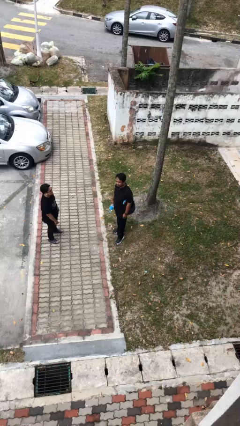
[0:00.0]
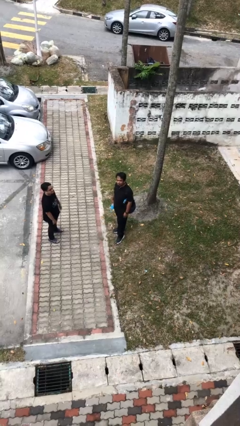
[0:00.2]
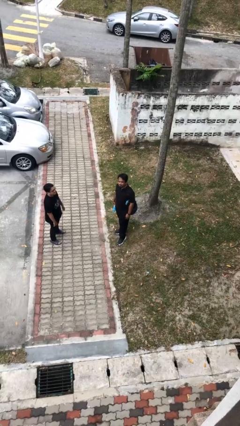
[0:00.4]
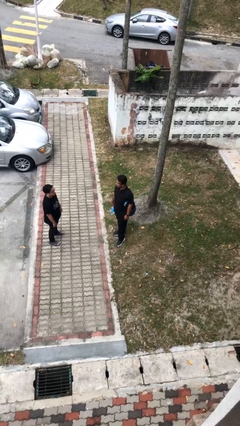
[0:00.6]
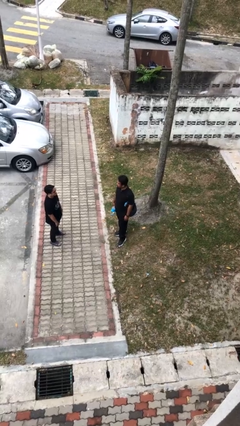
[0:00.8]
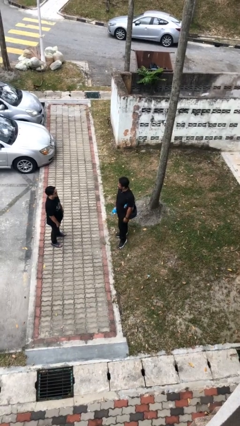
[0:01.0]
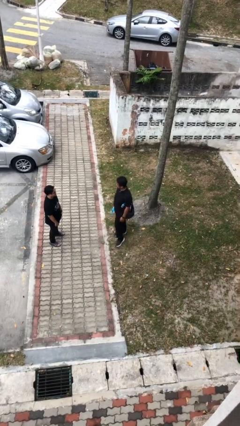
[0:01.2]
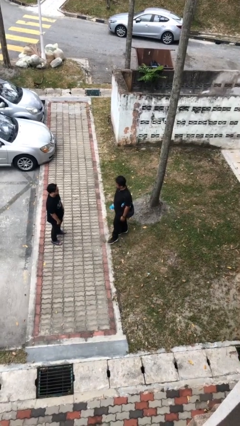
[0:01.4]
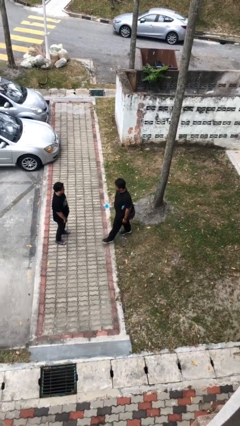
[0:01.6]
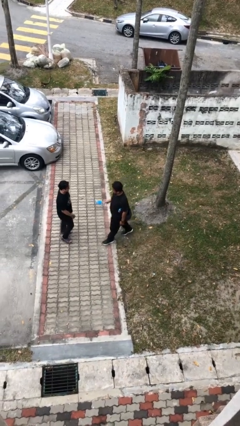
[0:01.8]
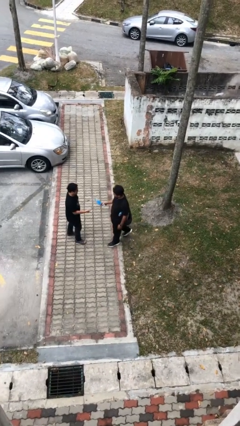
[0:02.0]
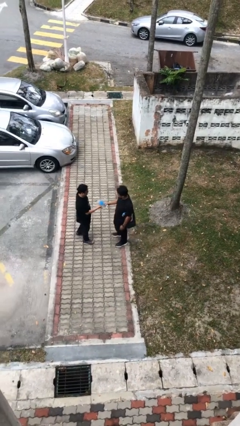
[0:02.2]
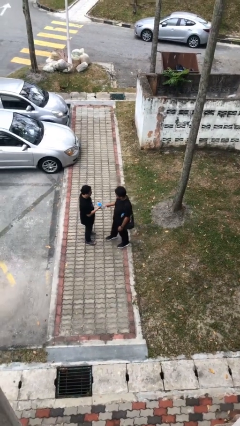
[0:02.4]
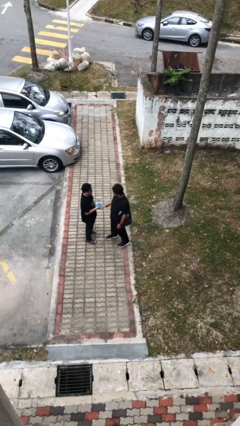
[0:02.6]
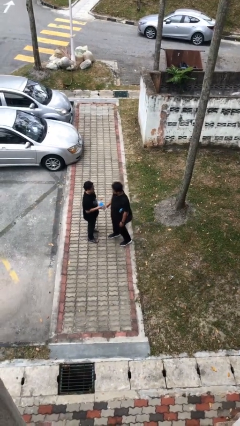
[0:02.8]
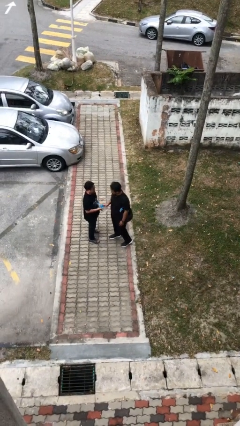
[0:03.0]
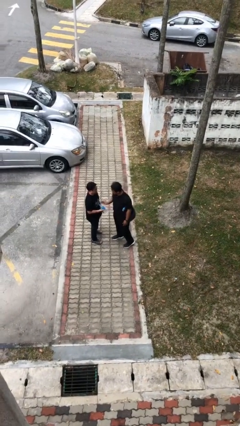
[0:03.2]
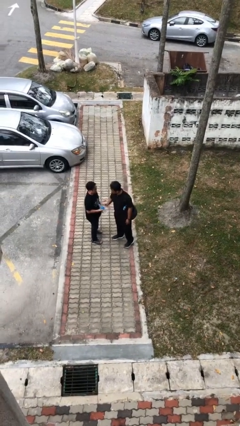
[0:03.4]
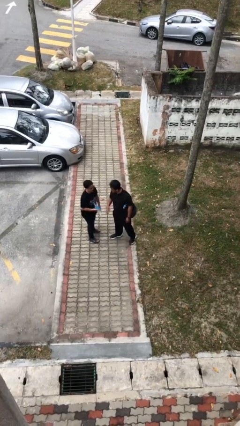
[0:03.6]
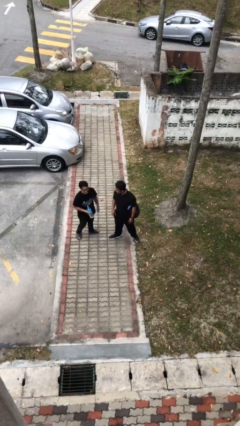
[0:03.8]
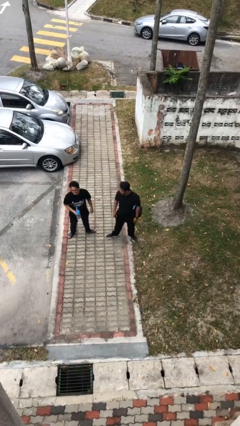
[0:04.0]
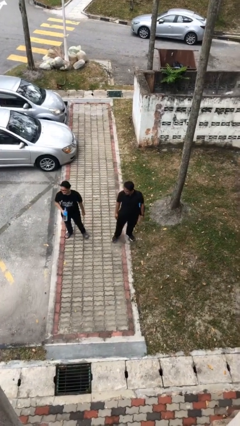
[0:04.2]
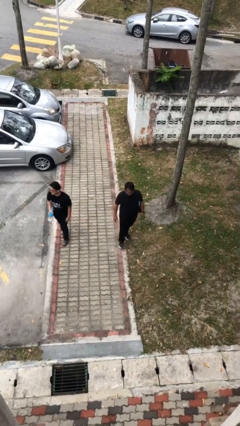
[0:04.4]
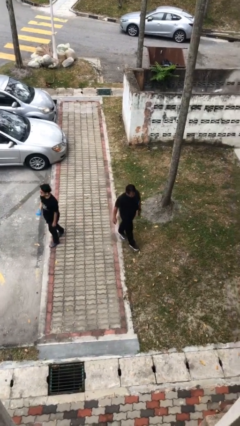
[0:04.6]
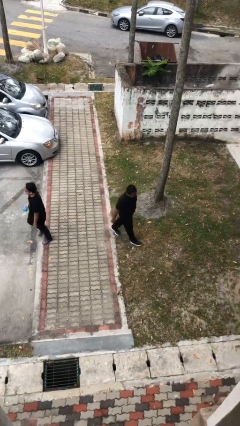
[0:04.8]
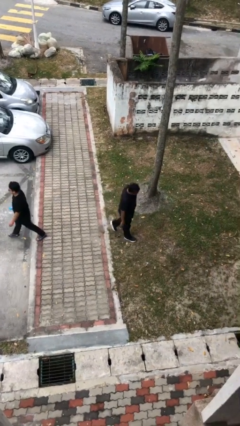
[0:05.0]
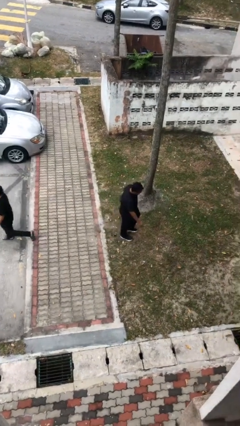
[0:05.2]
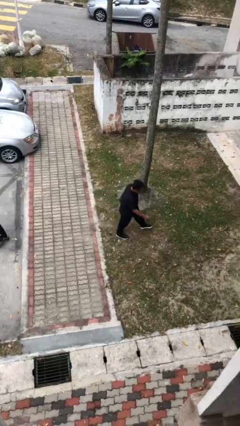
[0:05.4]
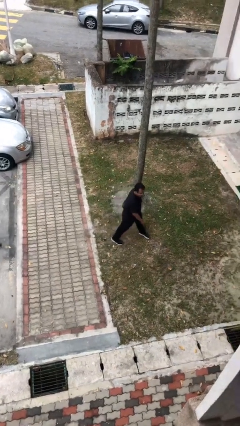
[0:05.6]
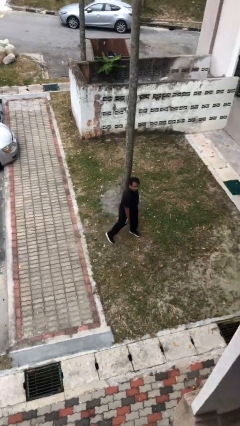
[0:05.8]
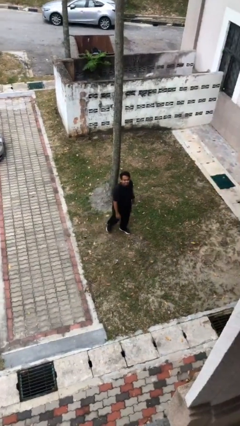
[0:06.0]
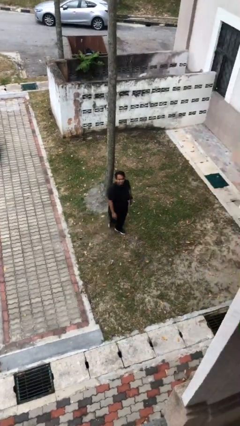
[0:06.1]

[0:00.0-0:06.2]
person transfers object to person

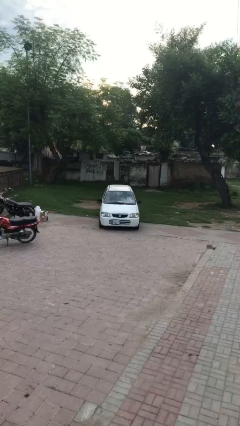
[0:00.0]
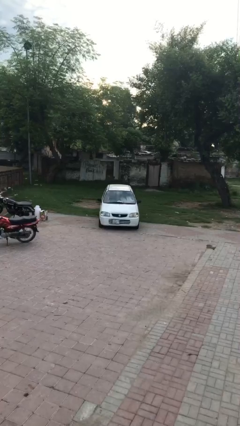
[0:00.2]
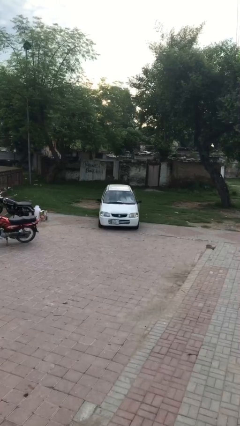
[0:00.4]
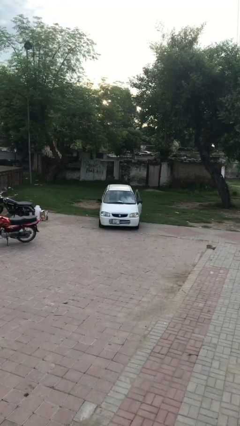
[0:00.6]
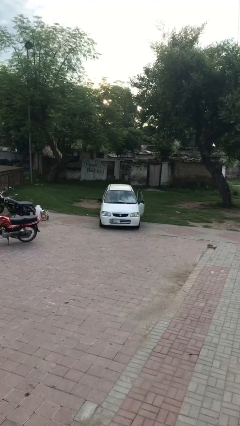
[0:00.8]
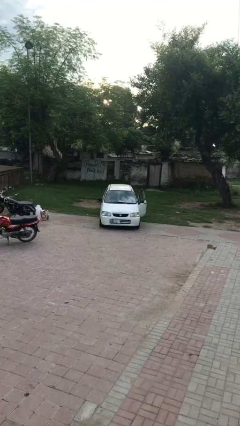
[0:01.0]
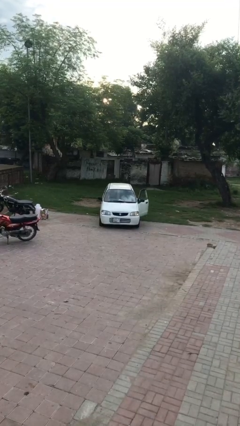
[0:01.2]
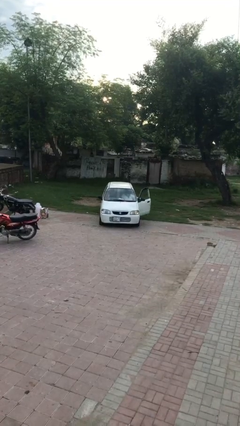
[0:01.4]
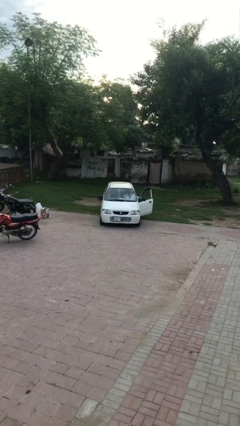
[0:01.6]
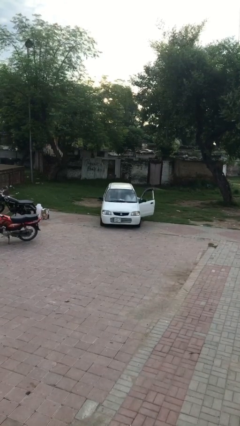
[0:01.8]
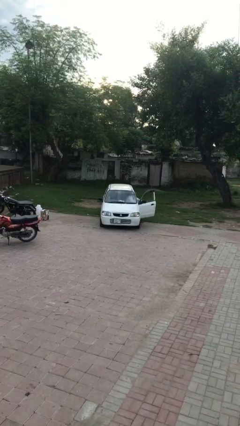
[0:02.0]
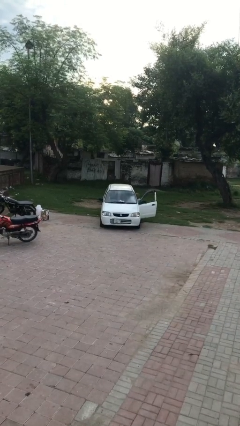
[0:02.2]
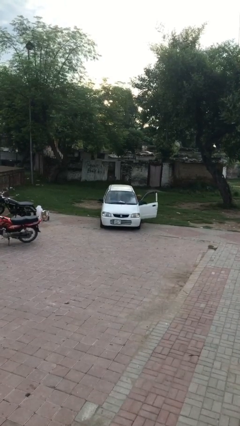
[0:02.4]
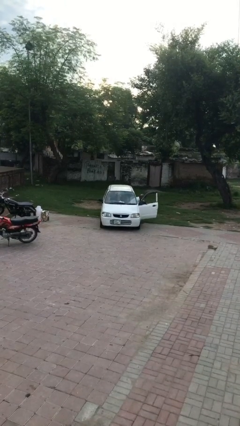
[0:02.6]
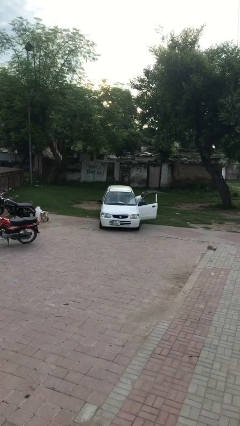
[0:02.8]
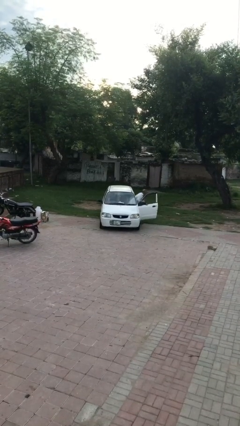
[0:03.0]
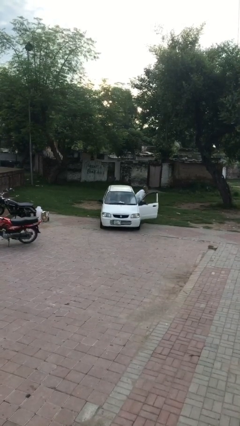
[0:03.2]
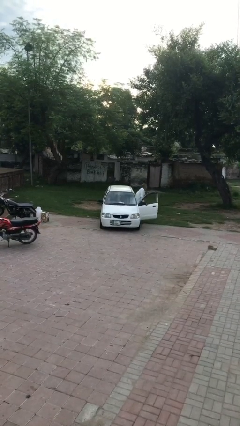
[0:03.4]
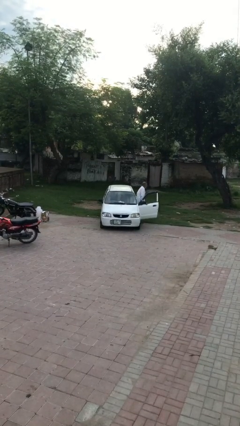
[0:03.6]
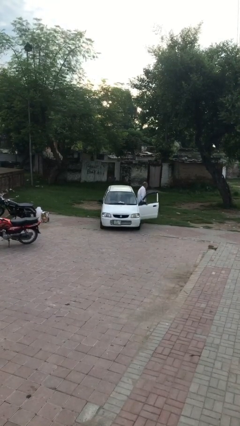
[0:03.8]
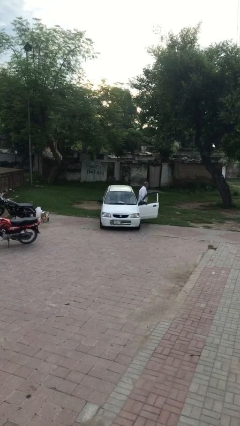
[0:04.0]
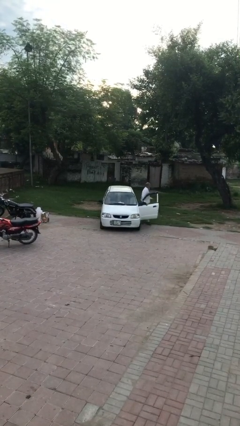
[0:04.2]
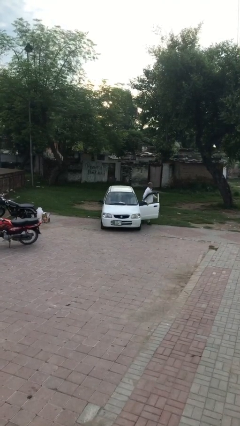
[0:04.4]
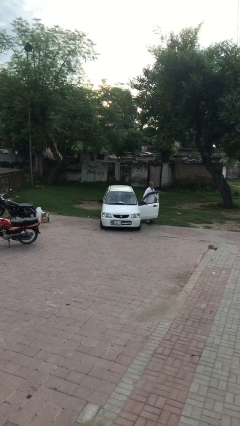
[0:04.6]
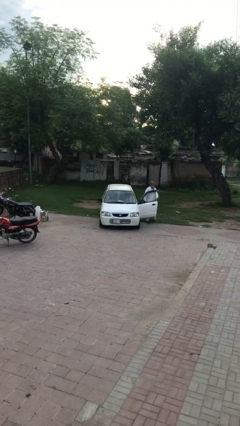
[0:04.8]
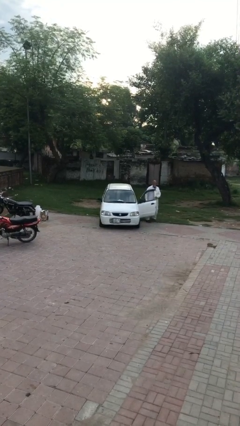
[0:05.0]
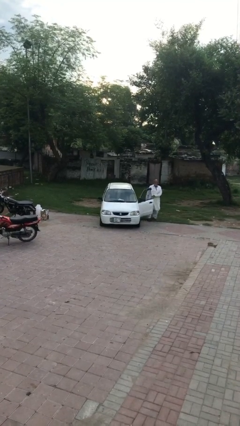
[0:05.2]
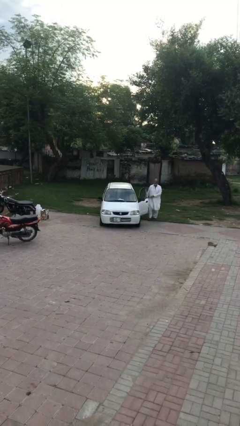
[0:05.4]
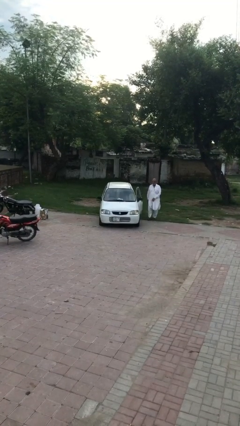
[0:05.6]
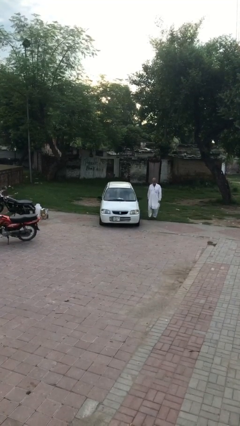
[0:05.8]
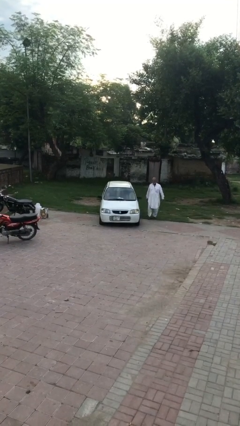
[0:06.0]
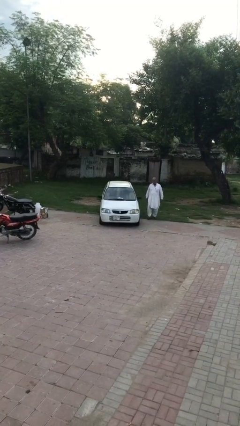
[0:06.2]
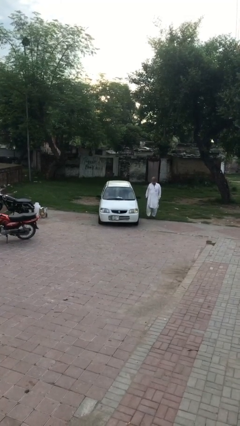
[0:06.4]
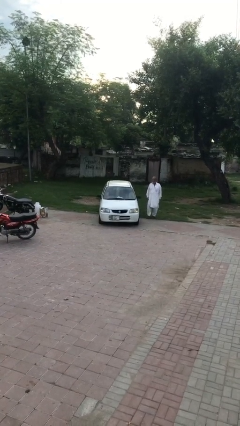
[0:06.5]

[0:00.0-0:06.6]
car drops off person

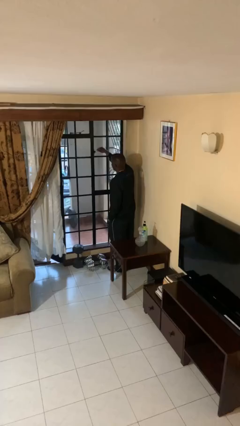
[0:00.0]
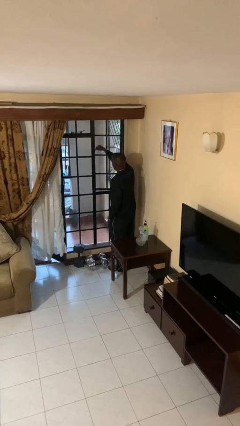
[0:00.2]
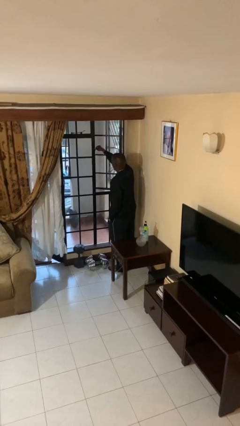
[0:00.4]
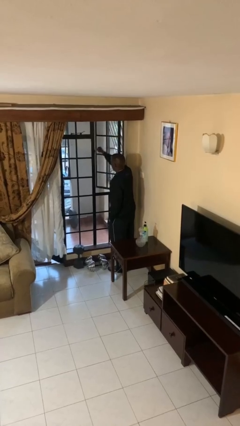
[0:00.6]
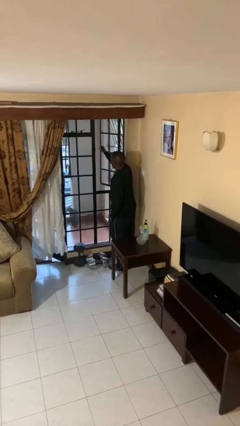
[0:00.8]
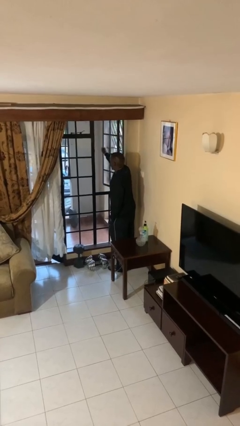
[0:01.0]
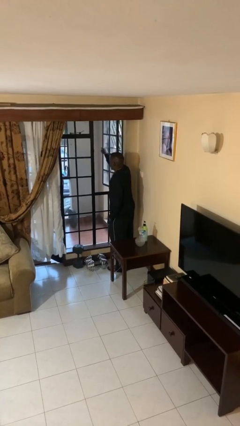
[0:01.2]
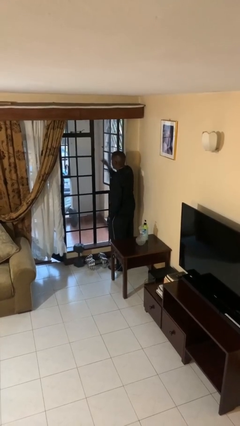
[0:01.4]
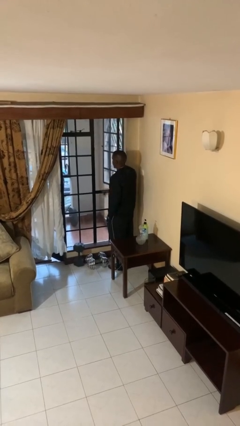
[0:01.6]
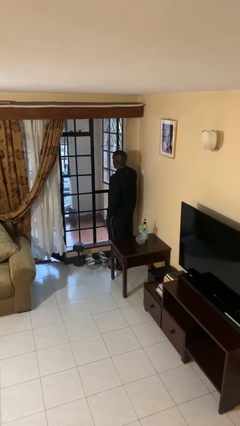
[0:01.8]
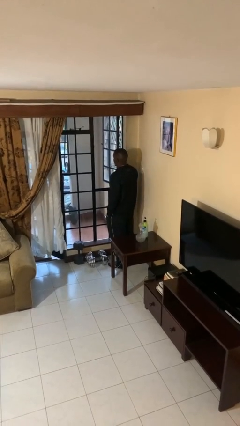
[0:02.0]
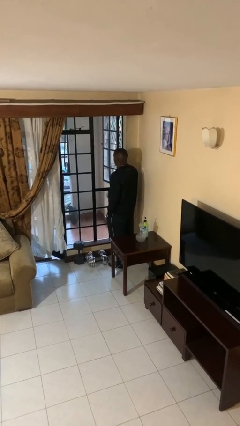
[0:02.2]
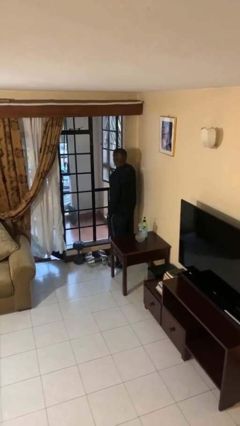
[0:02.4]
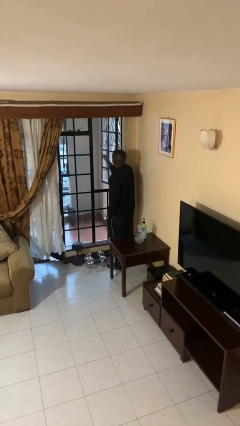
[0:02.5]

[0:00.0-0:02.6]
person opens home window

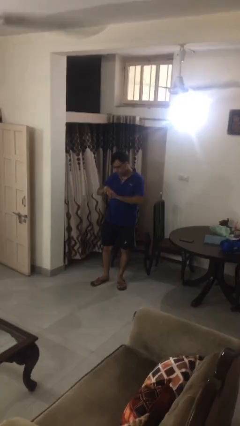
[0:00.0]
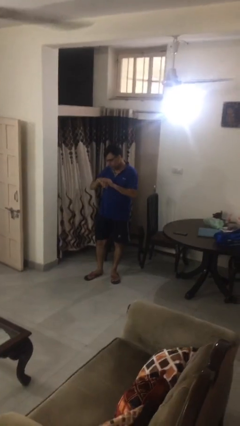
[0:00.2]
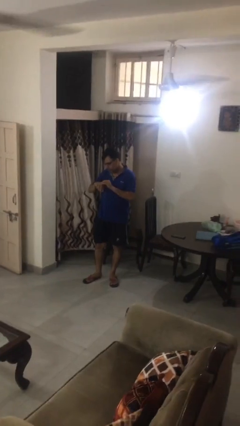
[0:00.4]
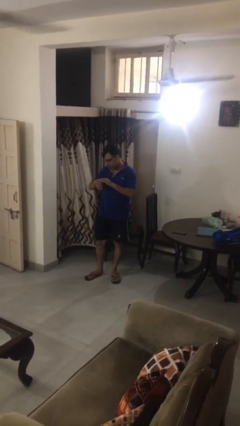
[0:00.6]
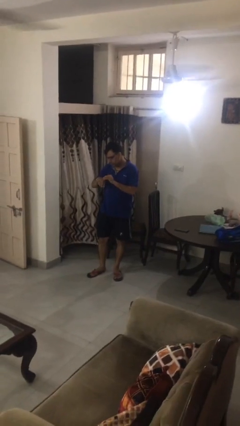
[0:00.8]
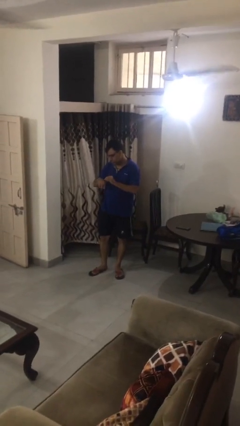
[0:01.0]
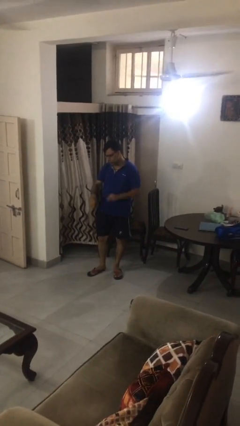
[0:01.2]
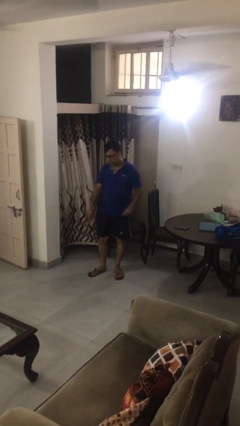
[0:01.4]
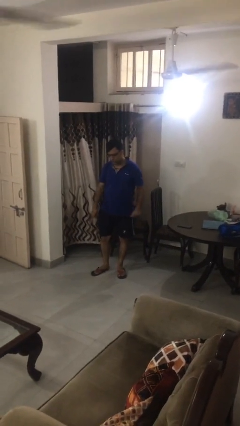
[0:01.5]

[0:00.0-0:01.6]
person swats bug

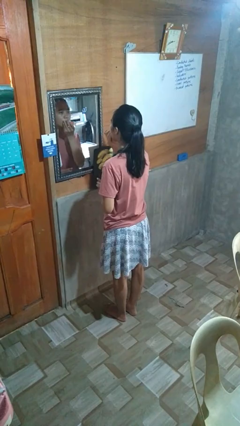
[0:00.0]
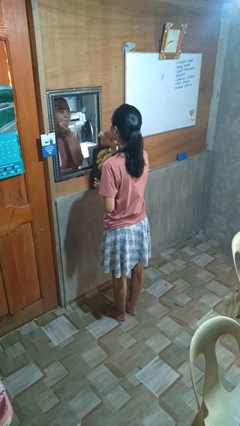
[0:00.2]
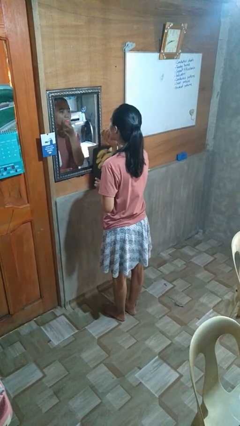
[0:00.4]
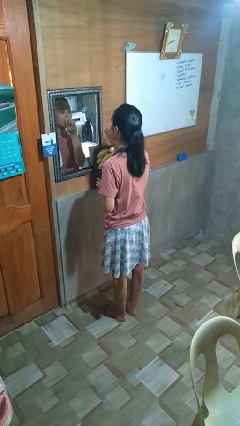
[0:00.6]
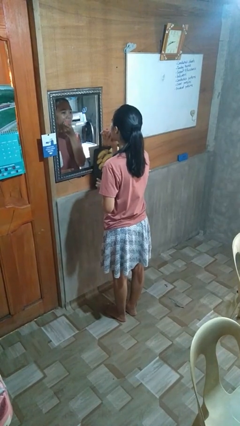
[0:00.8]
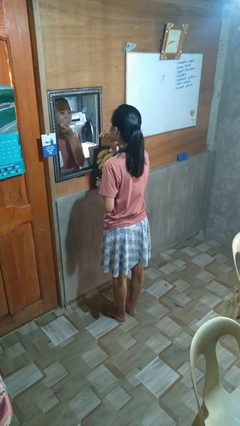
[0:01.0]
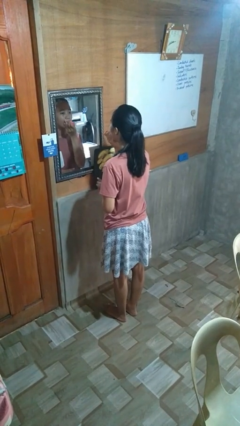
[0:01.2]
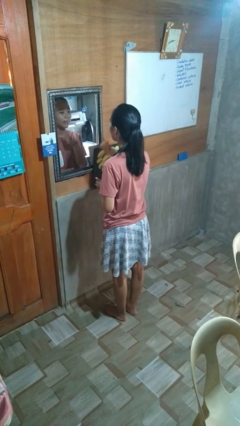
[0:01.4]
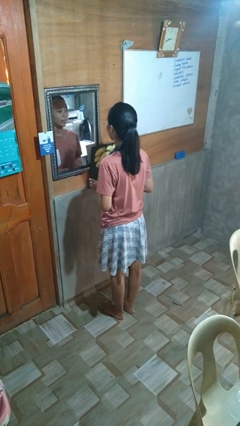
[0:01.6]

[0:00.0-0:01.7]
person applies lip makeup
